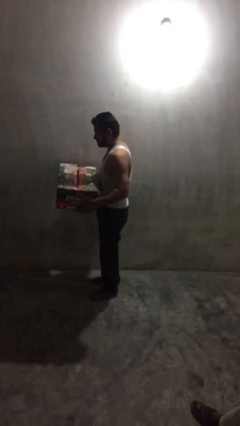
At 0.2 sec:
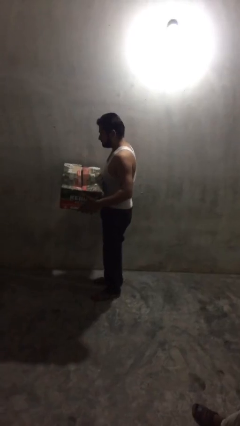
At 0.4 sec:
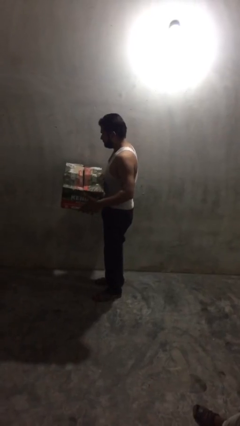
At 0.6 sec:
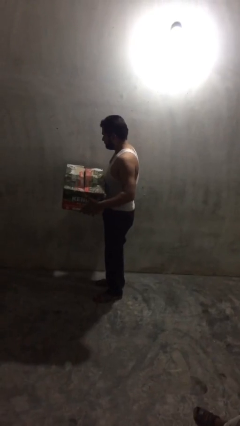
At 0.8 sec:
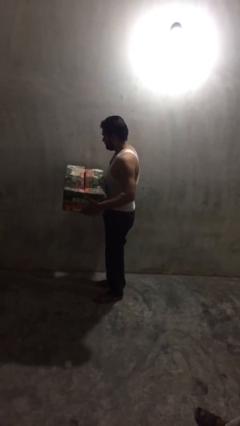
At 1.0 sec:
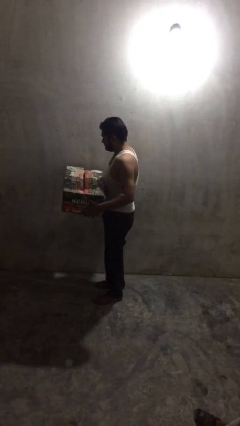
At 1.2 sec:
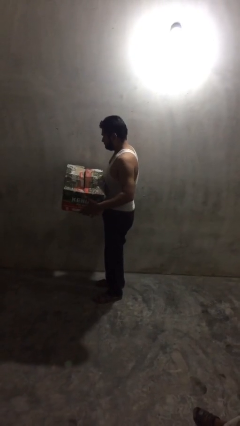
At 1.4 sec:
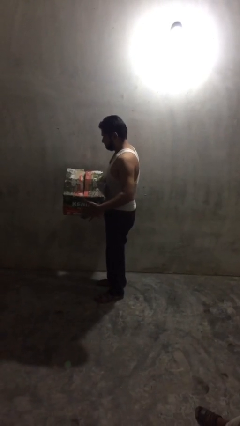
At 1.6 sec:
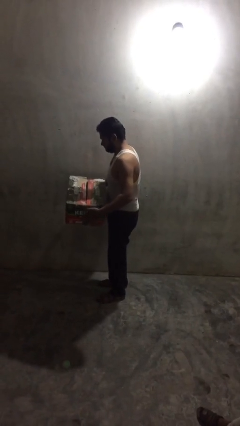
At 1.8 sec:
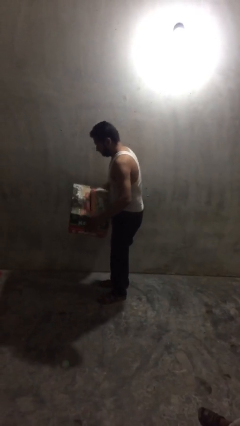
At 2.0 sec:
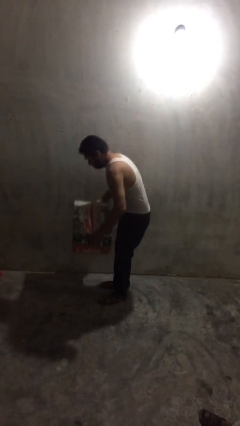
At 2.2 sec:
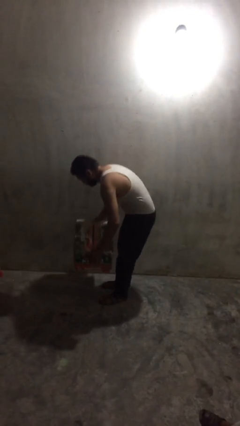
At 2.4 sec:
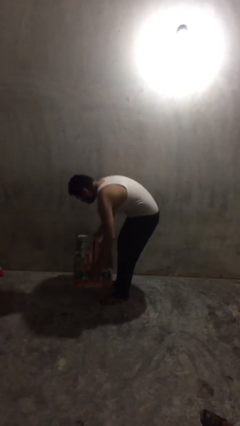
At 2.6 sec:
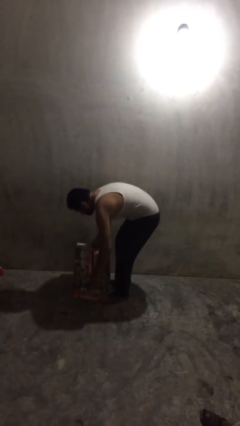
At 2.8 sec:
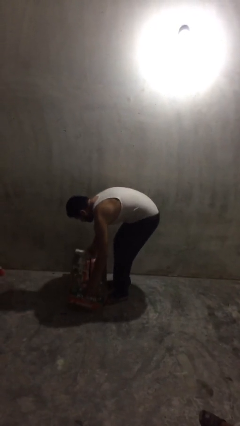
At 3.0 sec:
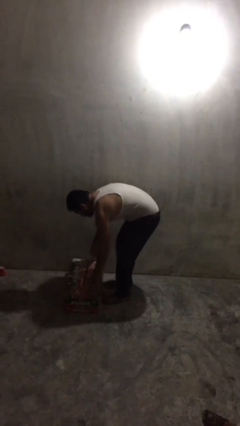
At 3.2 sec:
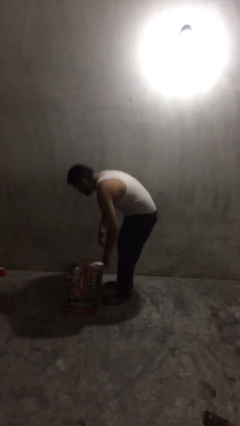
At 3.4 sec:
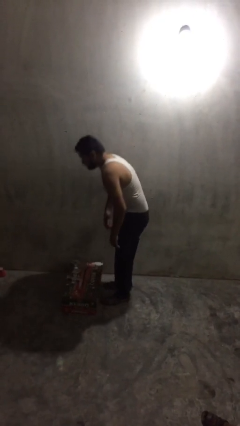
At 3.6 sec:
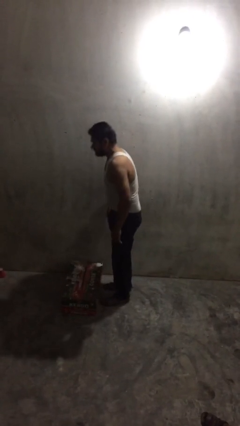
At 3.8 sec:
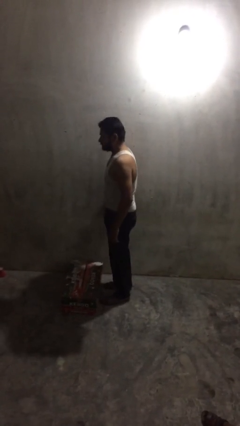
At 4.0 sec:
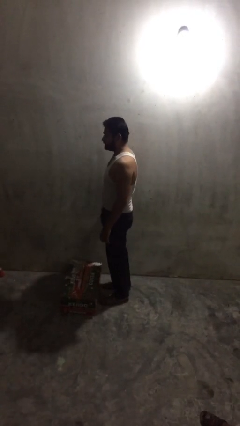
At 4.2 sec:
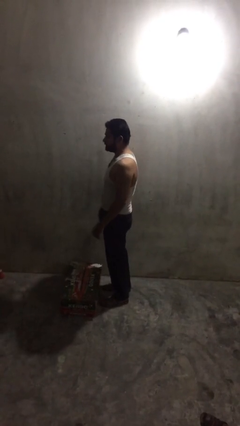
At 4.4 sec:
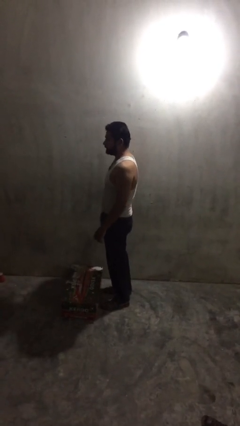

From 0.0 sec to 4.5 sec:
person puts down object on floor

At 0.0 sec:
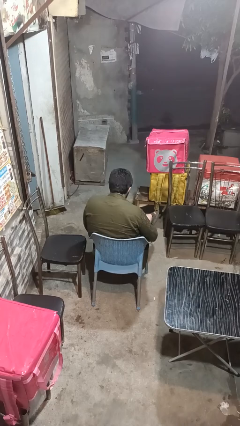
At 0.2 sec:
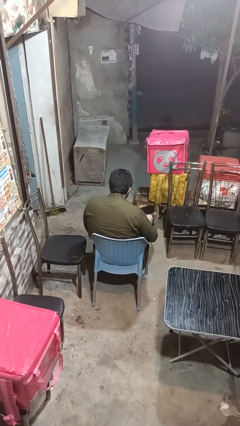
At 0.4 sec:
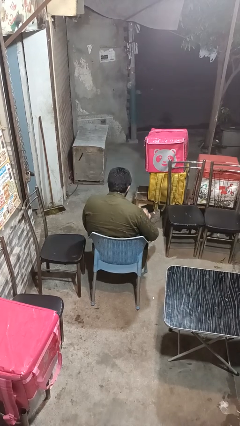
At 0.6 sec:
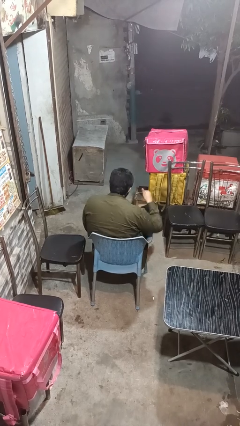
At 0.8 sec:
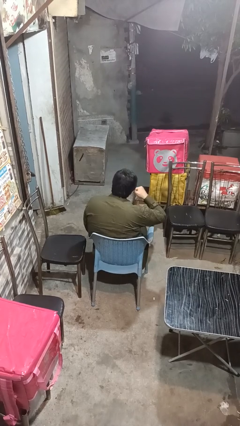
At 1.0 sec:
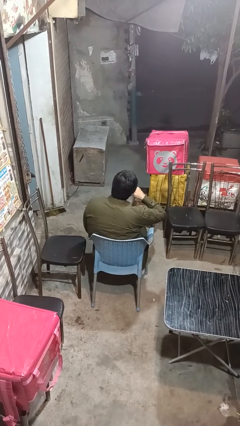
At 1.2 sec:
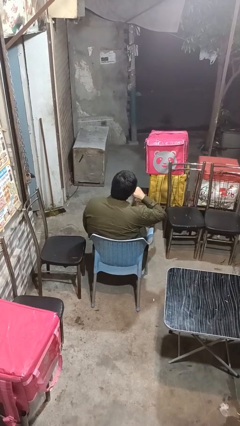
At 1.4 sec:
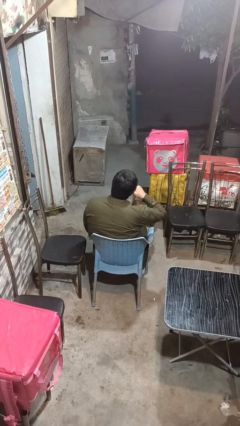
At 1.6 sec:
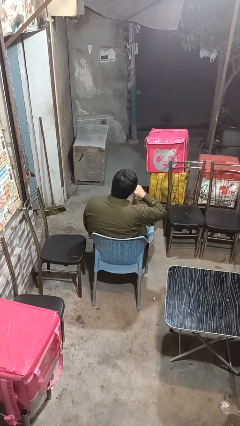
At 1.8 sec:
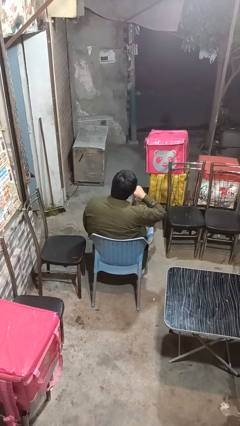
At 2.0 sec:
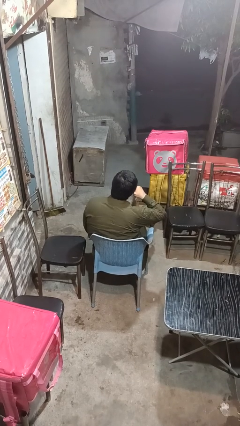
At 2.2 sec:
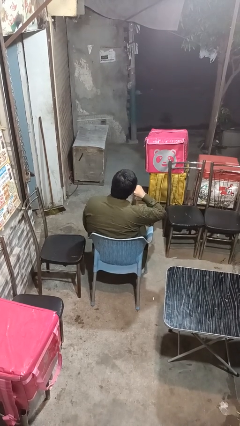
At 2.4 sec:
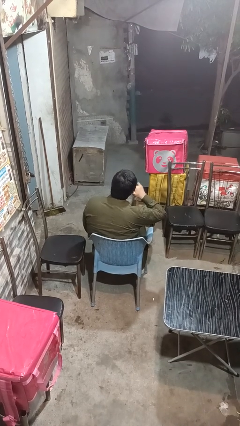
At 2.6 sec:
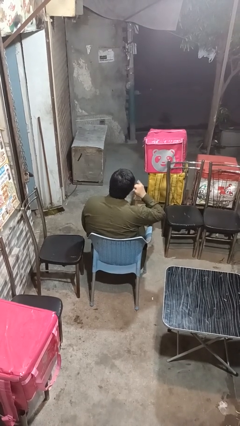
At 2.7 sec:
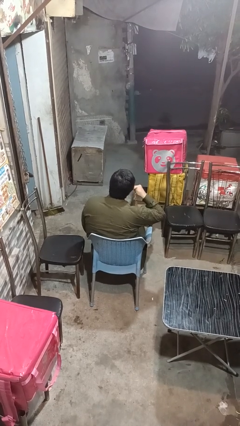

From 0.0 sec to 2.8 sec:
person gestures call me

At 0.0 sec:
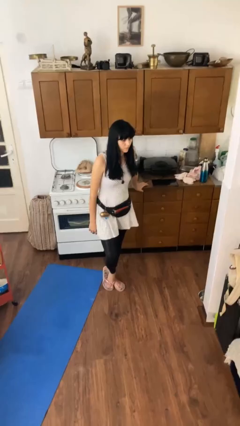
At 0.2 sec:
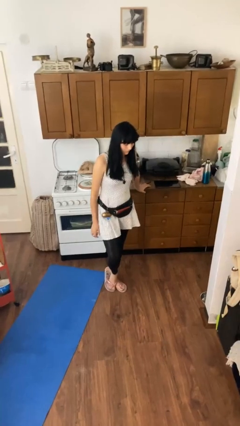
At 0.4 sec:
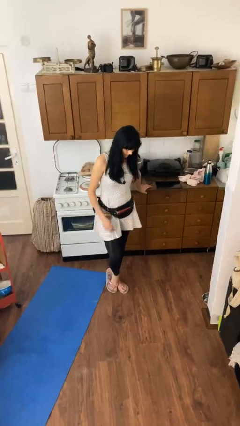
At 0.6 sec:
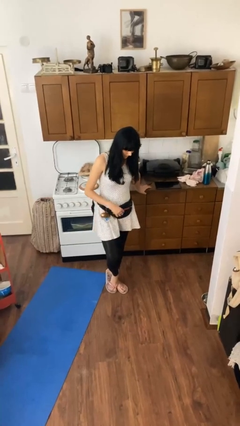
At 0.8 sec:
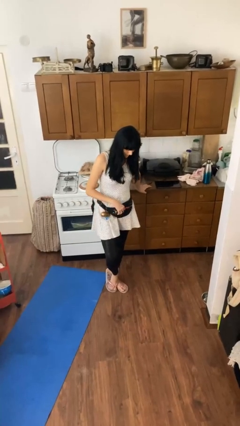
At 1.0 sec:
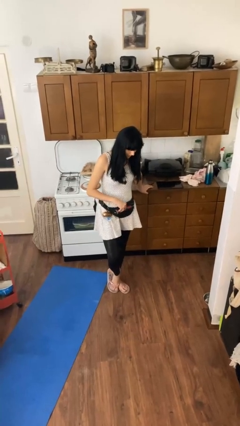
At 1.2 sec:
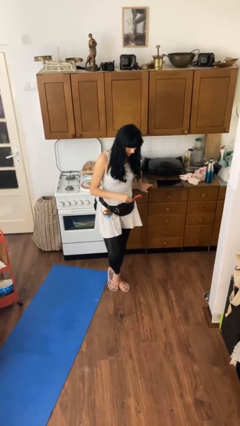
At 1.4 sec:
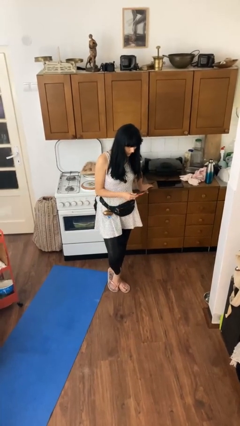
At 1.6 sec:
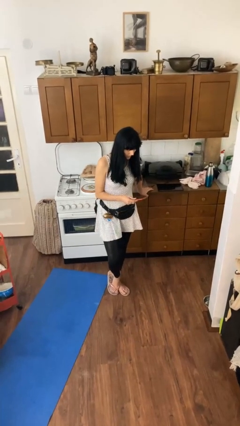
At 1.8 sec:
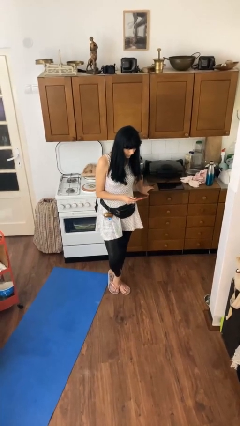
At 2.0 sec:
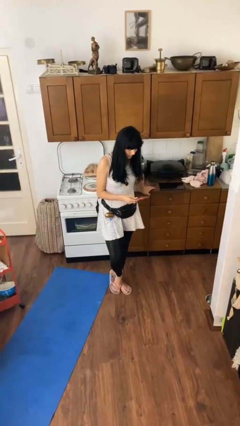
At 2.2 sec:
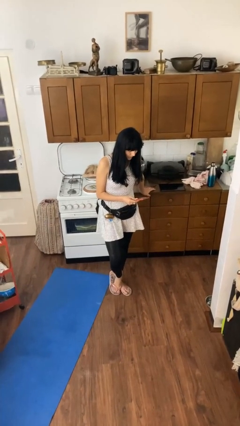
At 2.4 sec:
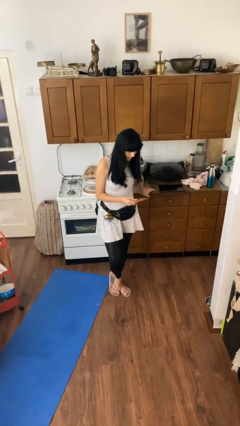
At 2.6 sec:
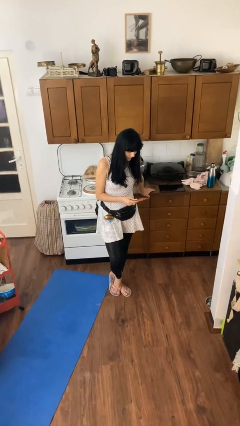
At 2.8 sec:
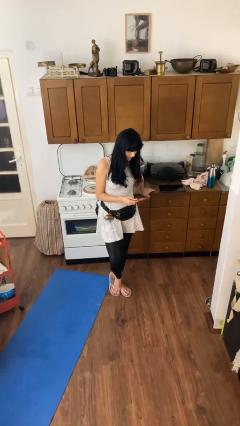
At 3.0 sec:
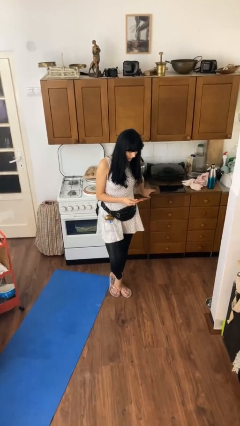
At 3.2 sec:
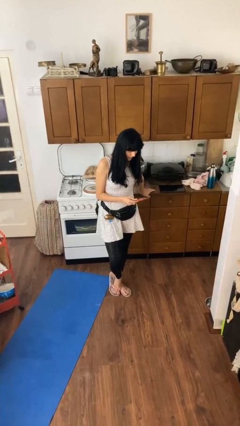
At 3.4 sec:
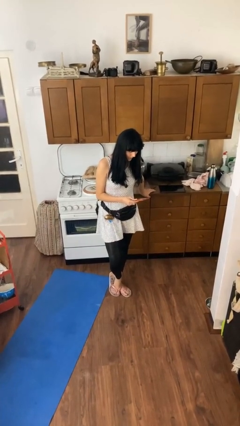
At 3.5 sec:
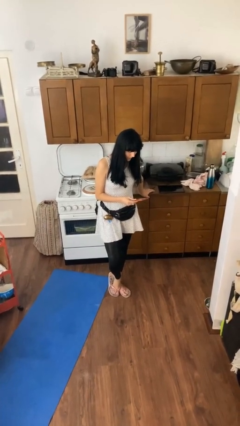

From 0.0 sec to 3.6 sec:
person takes phone from pocket

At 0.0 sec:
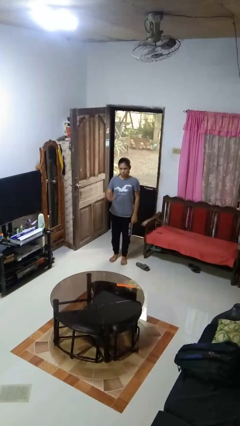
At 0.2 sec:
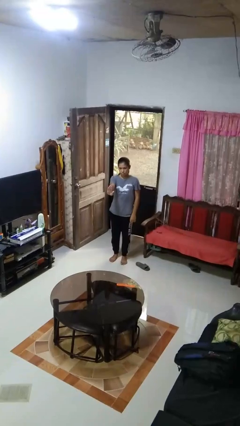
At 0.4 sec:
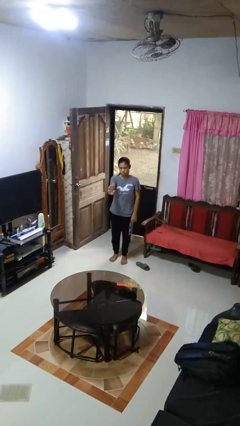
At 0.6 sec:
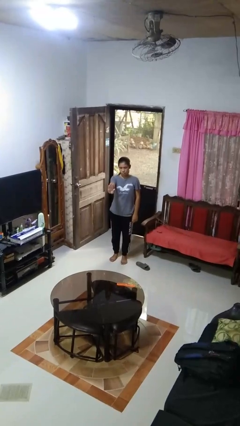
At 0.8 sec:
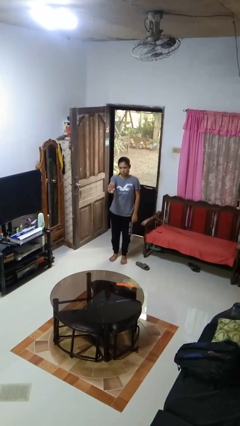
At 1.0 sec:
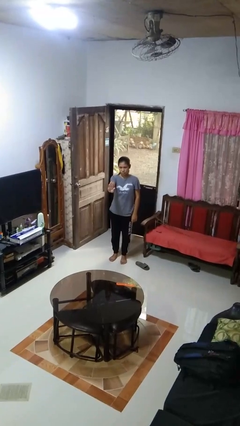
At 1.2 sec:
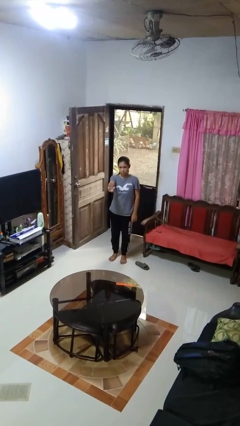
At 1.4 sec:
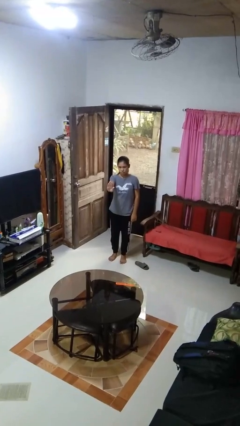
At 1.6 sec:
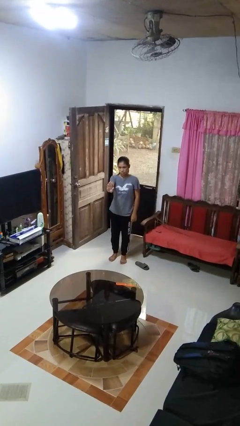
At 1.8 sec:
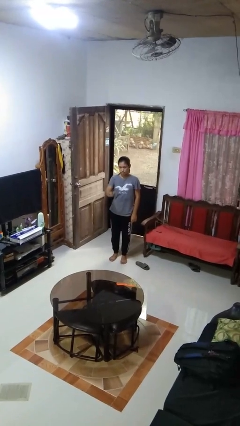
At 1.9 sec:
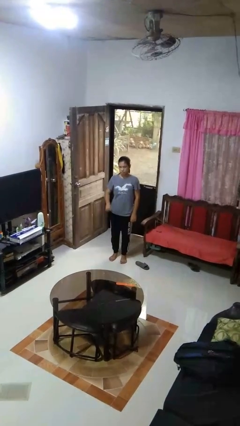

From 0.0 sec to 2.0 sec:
person gestures stop

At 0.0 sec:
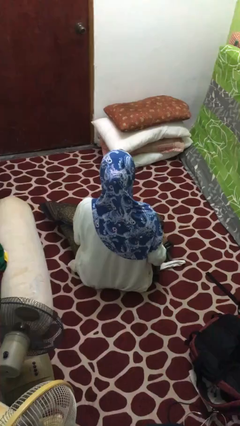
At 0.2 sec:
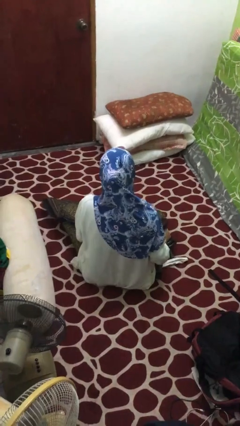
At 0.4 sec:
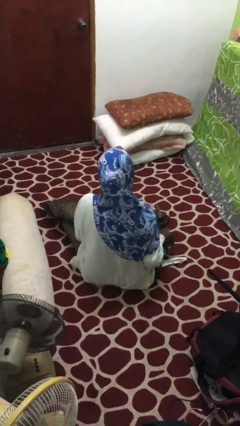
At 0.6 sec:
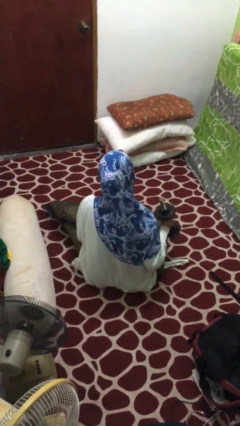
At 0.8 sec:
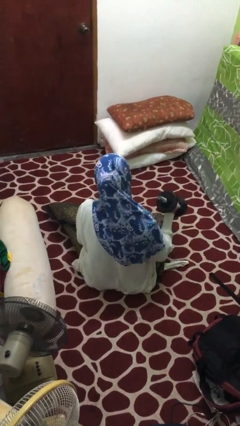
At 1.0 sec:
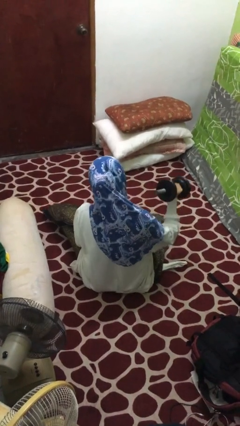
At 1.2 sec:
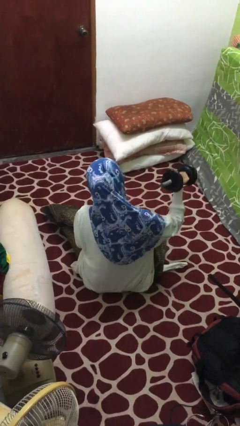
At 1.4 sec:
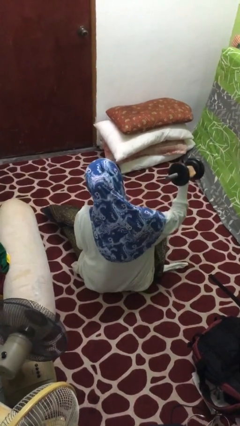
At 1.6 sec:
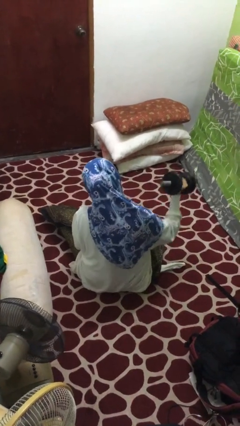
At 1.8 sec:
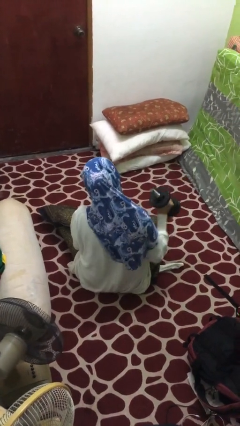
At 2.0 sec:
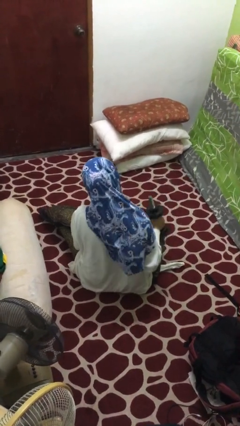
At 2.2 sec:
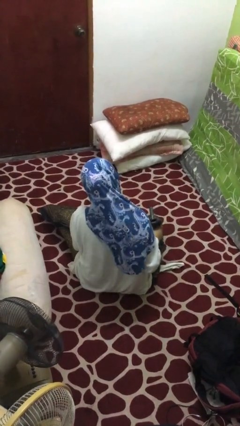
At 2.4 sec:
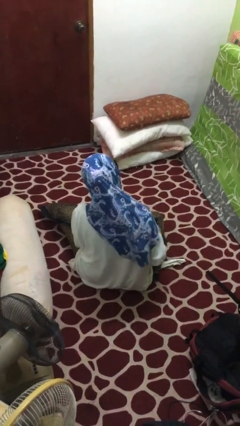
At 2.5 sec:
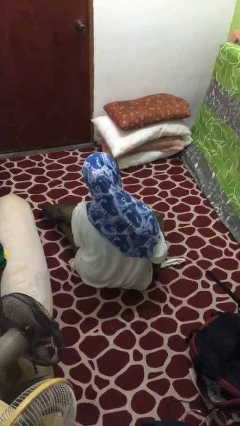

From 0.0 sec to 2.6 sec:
person lifts dumbbells

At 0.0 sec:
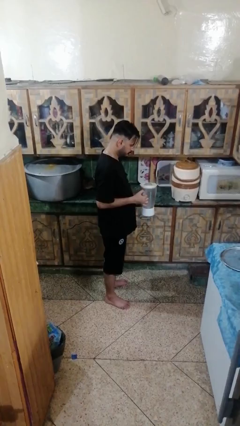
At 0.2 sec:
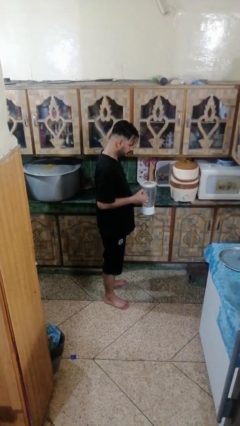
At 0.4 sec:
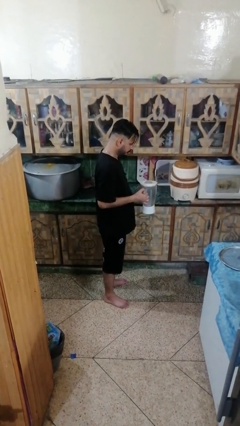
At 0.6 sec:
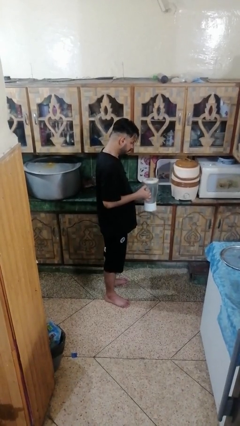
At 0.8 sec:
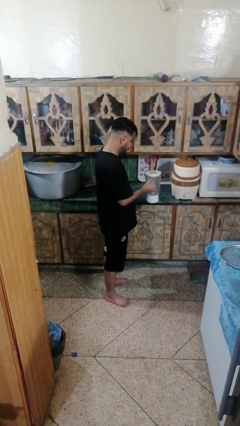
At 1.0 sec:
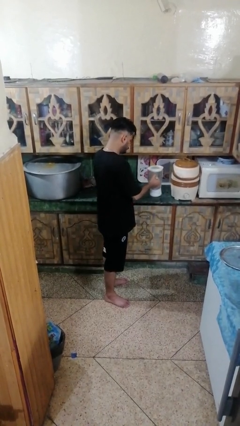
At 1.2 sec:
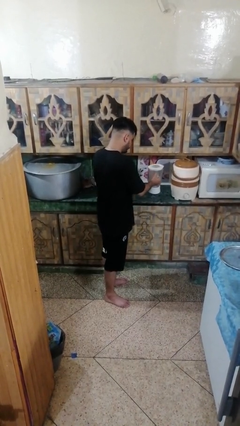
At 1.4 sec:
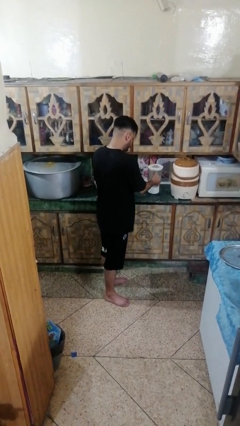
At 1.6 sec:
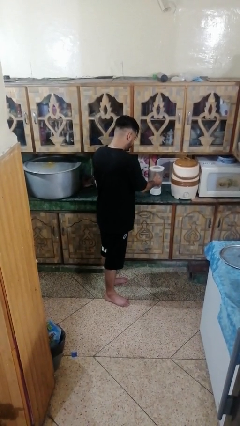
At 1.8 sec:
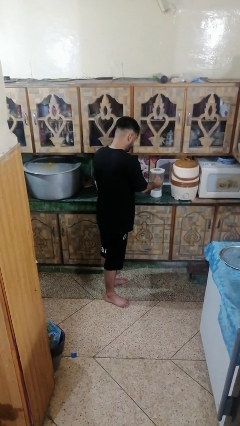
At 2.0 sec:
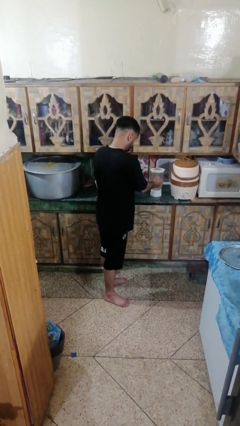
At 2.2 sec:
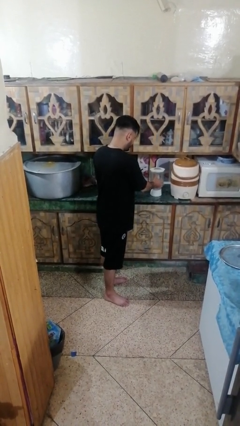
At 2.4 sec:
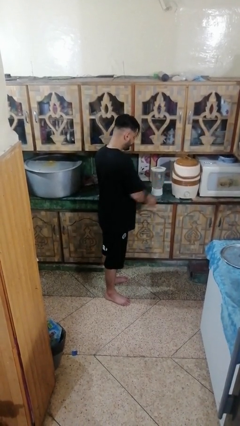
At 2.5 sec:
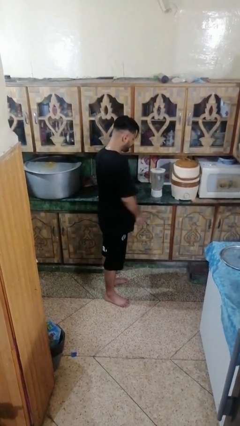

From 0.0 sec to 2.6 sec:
person puts down object on countertop
